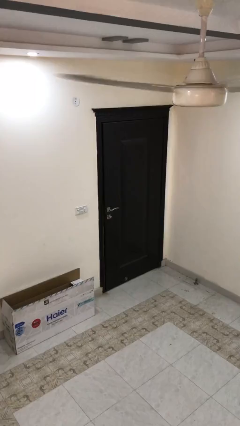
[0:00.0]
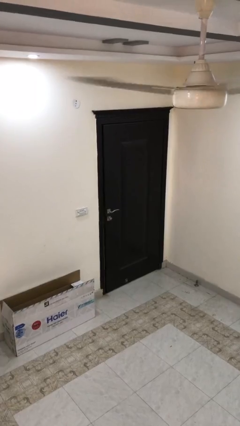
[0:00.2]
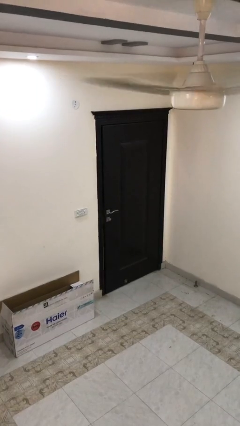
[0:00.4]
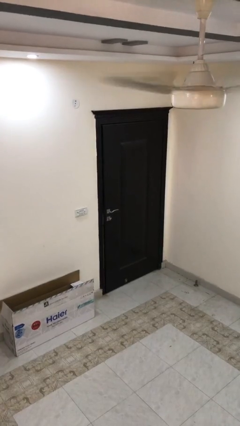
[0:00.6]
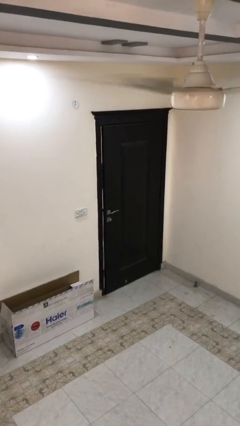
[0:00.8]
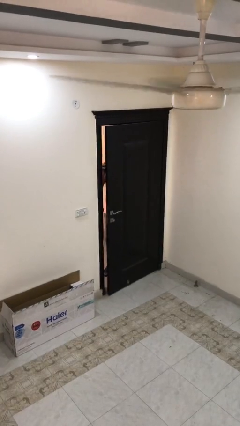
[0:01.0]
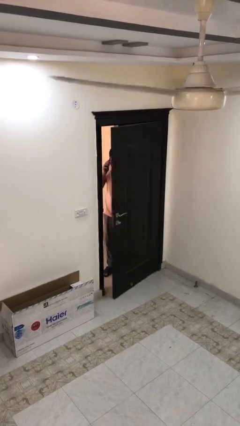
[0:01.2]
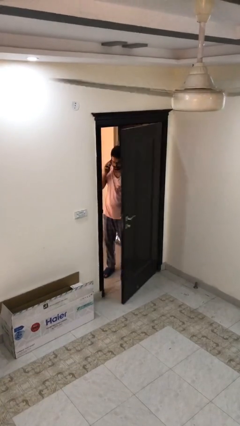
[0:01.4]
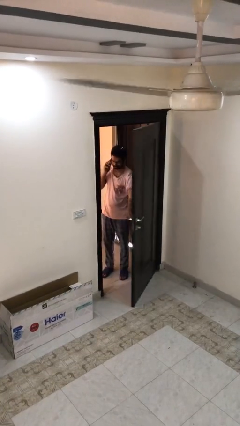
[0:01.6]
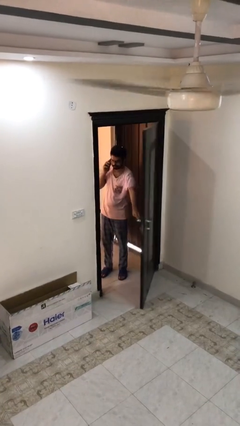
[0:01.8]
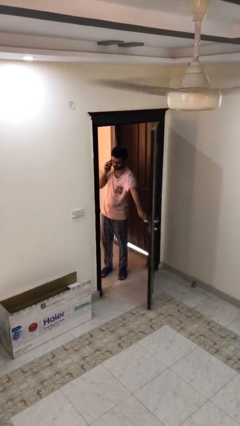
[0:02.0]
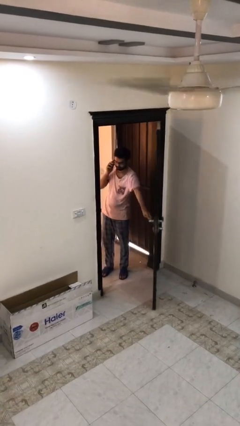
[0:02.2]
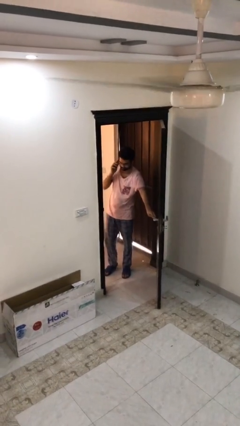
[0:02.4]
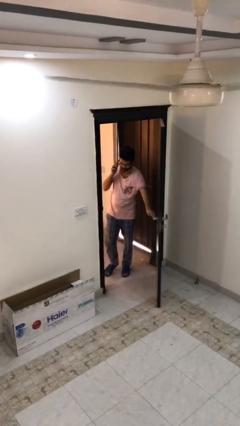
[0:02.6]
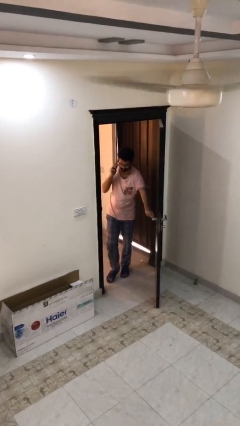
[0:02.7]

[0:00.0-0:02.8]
person opens facility door

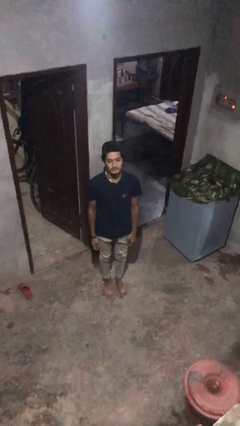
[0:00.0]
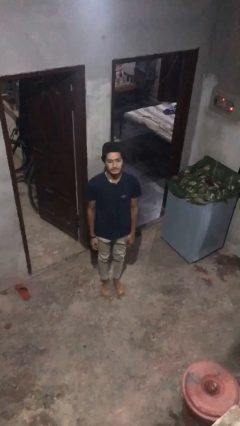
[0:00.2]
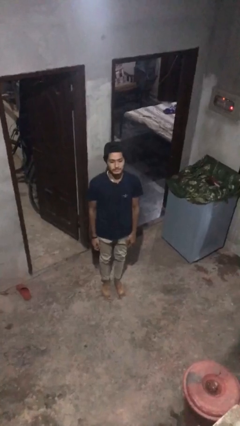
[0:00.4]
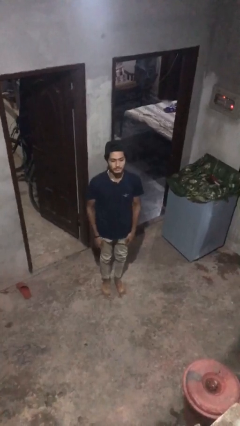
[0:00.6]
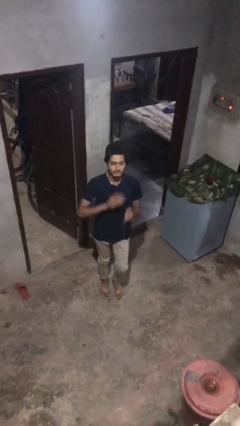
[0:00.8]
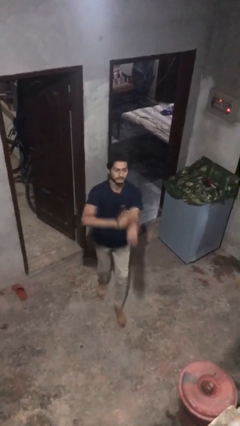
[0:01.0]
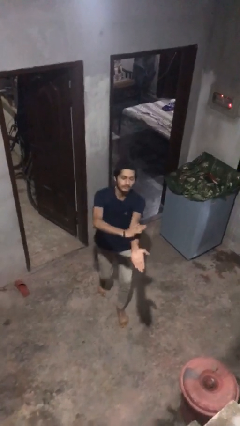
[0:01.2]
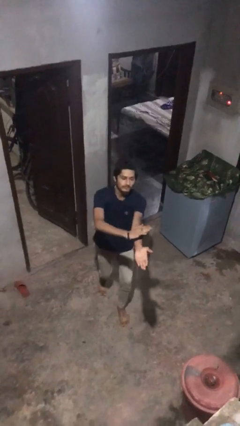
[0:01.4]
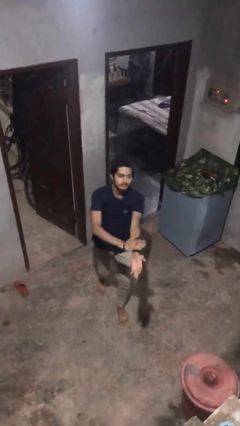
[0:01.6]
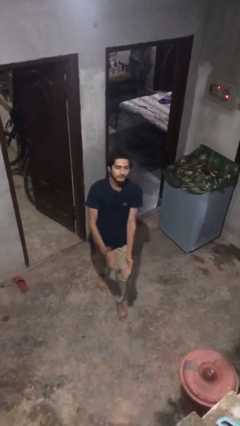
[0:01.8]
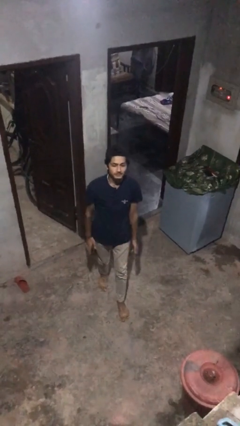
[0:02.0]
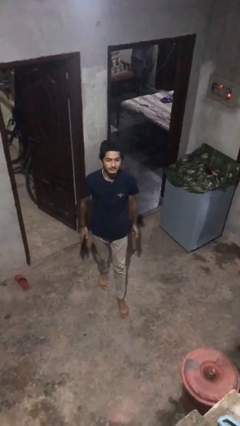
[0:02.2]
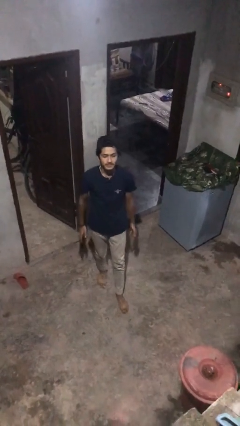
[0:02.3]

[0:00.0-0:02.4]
person karate chop

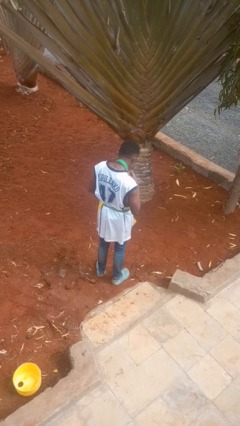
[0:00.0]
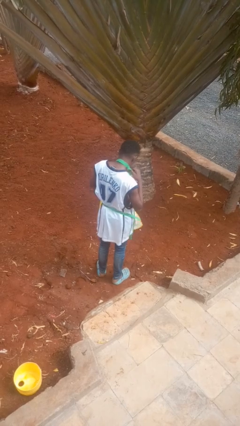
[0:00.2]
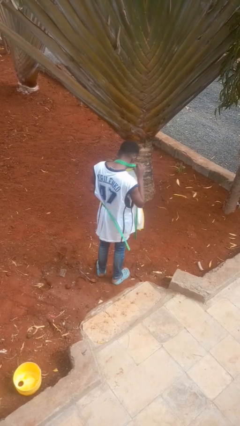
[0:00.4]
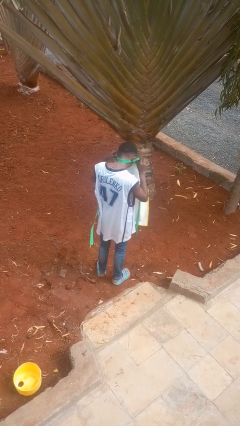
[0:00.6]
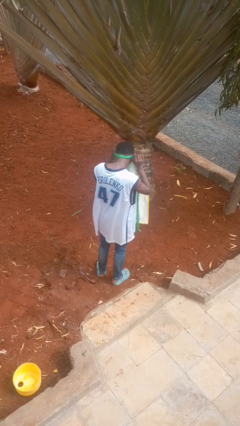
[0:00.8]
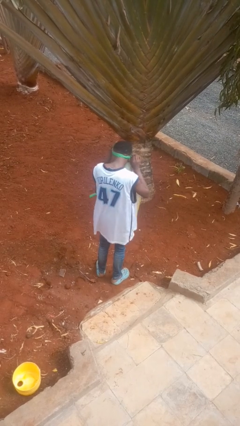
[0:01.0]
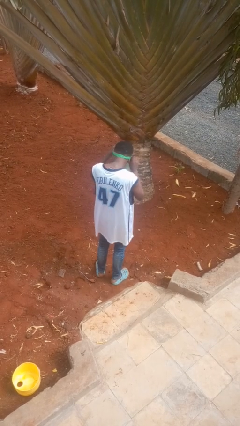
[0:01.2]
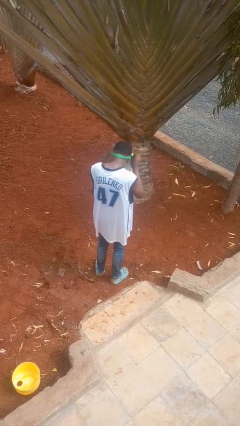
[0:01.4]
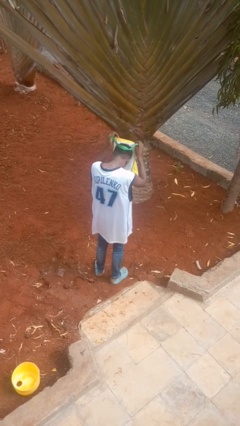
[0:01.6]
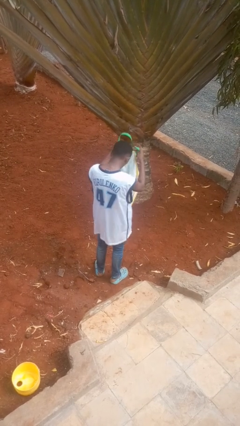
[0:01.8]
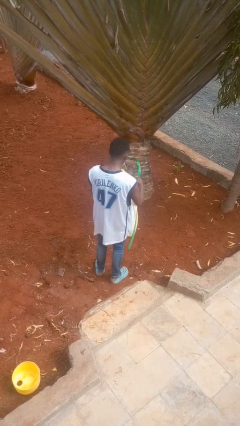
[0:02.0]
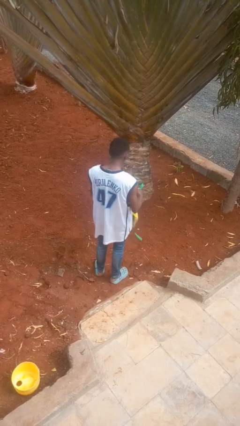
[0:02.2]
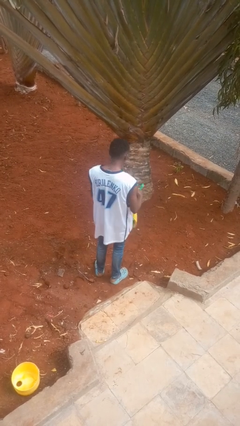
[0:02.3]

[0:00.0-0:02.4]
person takes off apron

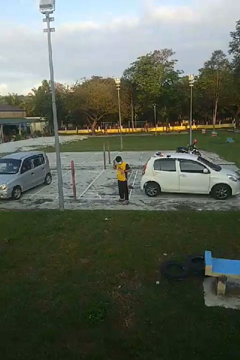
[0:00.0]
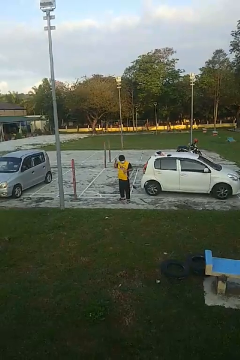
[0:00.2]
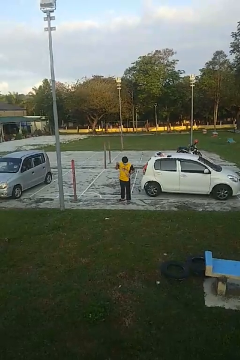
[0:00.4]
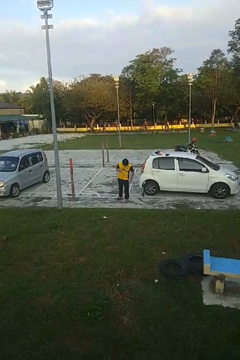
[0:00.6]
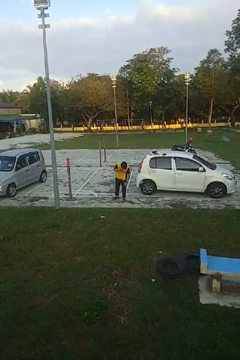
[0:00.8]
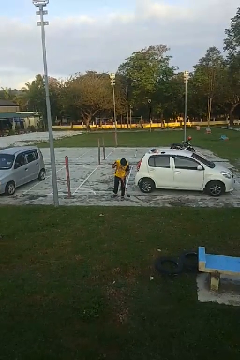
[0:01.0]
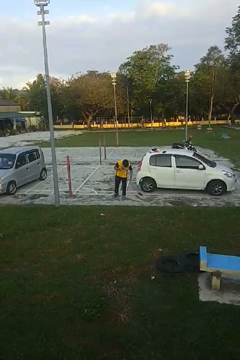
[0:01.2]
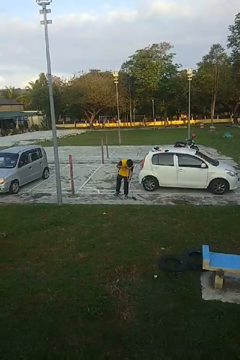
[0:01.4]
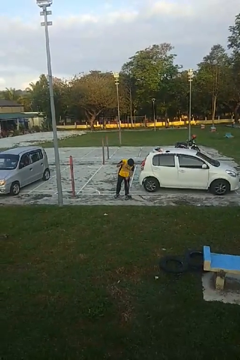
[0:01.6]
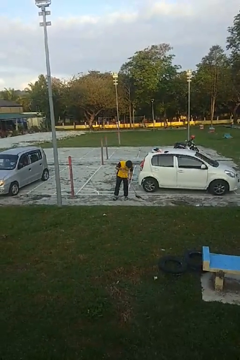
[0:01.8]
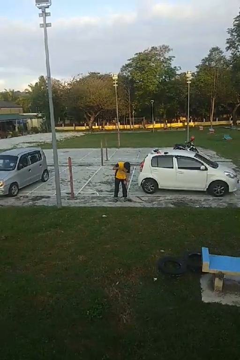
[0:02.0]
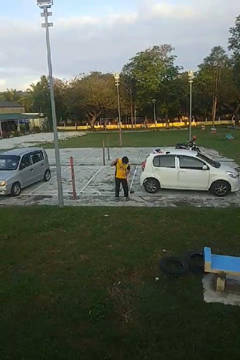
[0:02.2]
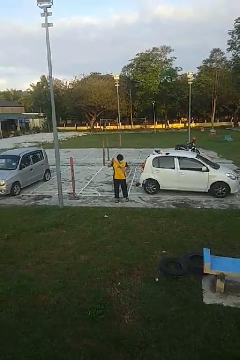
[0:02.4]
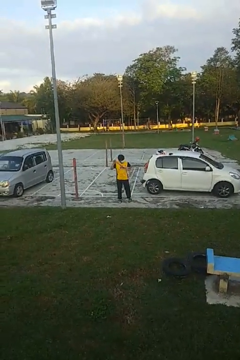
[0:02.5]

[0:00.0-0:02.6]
person sweeps floor

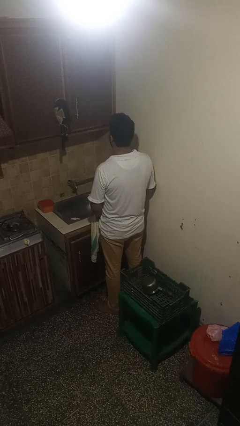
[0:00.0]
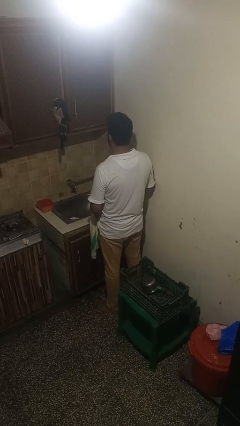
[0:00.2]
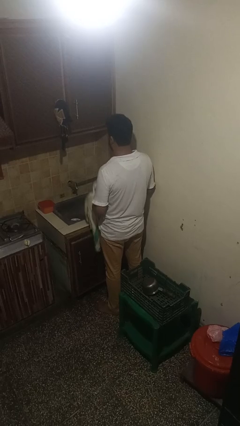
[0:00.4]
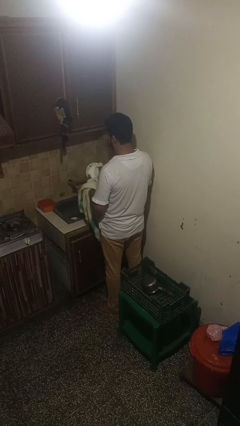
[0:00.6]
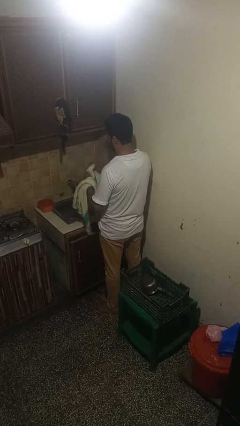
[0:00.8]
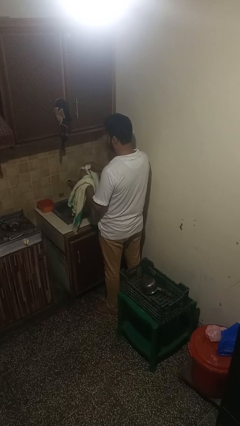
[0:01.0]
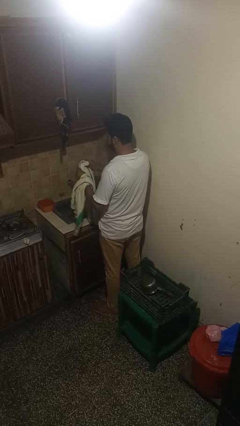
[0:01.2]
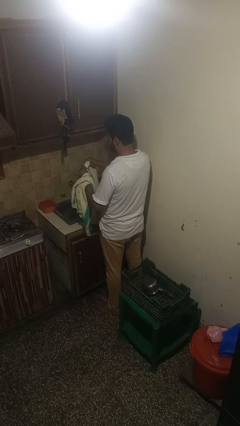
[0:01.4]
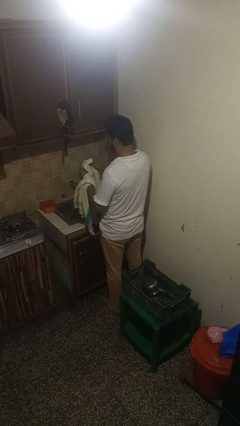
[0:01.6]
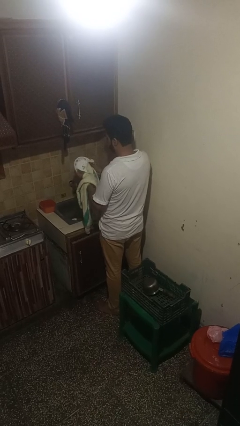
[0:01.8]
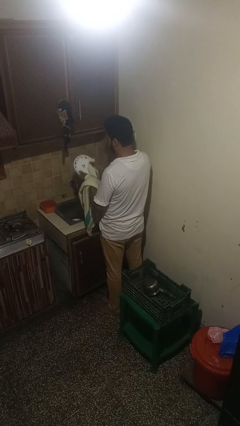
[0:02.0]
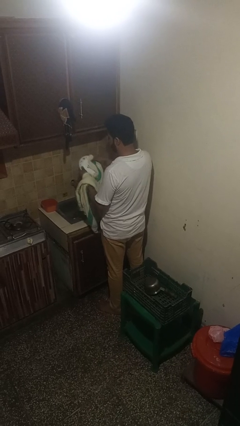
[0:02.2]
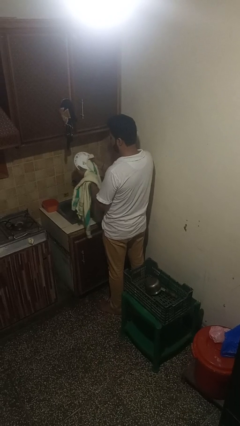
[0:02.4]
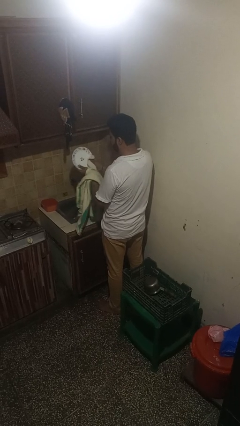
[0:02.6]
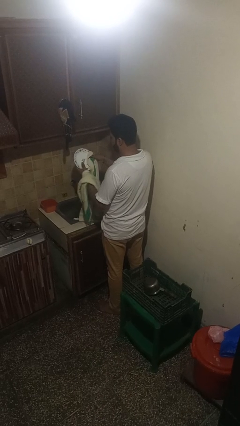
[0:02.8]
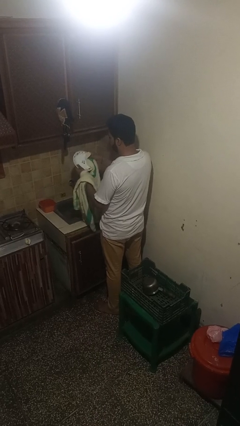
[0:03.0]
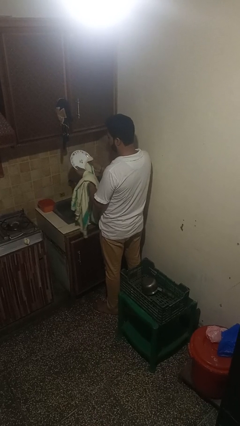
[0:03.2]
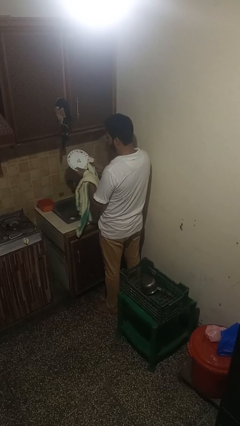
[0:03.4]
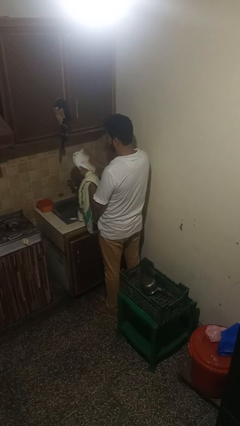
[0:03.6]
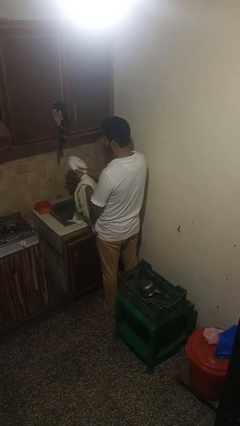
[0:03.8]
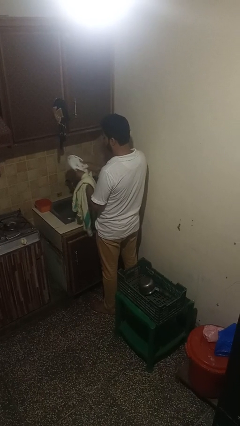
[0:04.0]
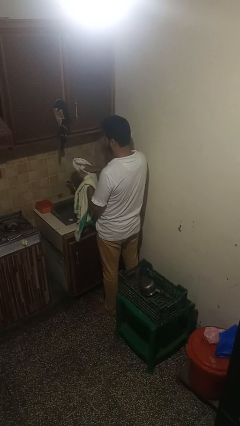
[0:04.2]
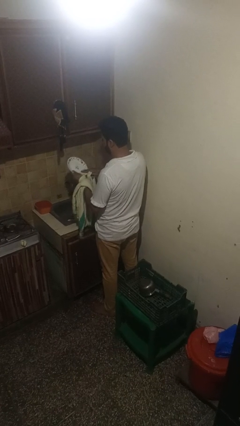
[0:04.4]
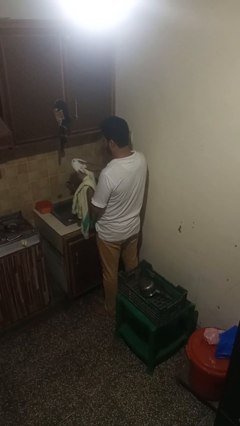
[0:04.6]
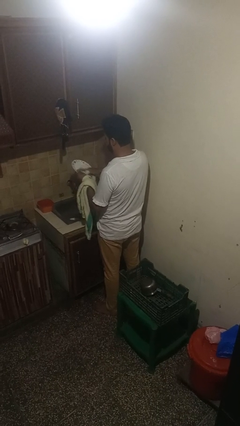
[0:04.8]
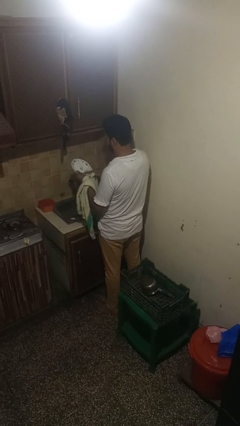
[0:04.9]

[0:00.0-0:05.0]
person dries dish

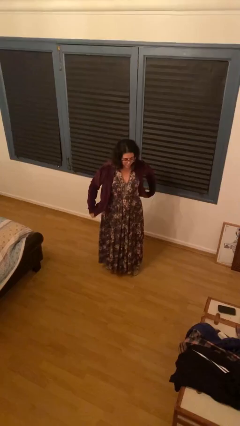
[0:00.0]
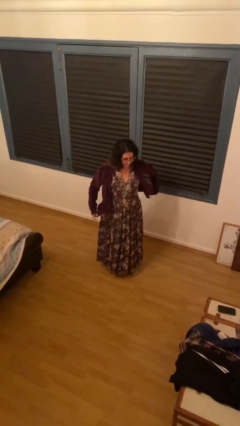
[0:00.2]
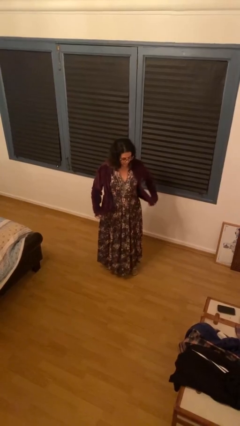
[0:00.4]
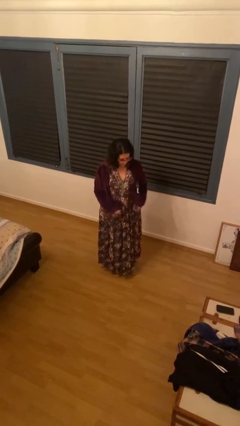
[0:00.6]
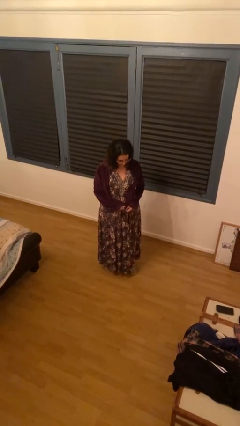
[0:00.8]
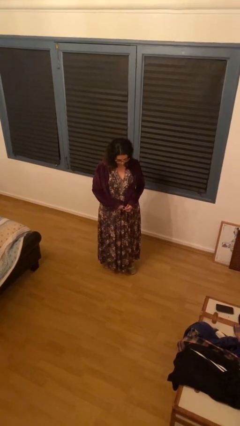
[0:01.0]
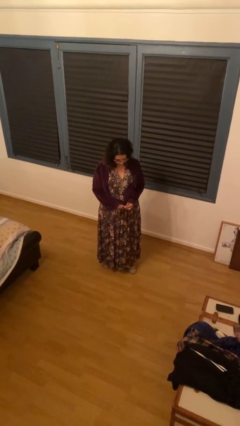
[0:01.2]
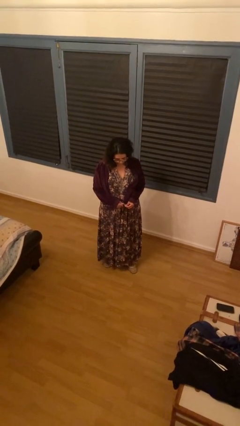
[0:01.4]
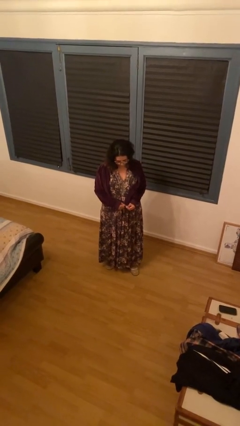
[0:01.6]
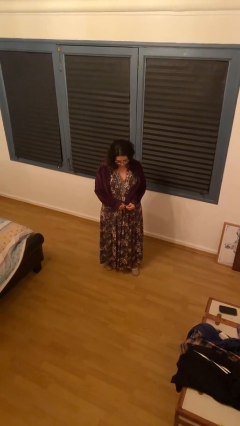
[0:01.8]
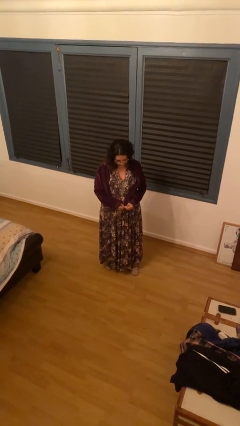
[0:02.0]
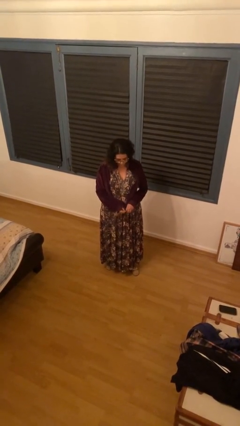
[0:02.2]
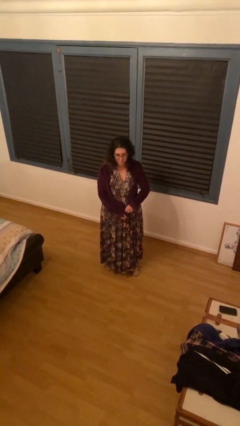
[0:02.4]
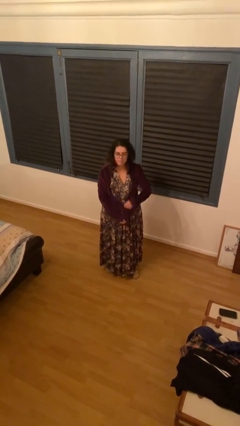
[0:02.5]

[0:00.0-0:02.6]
person zips up jacket

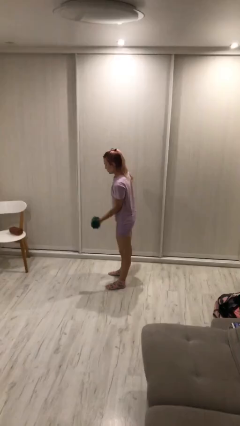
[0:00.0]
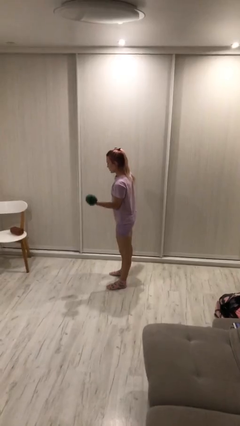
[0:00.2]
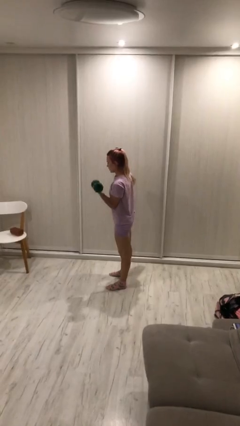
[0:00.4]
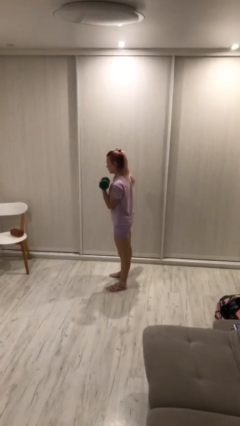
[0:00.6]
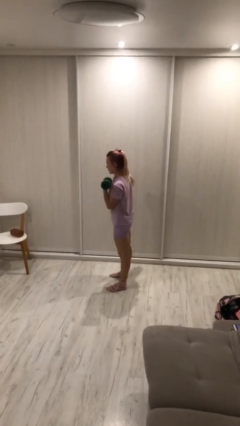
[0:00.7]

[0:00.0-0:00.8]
person lifts dumbbells
